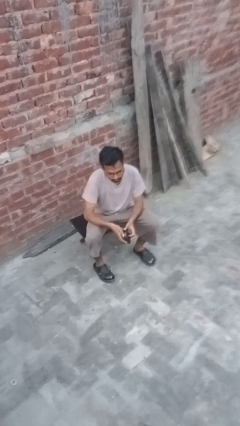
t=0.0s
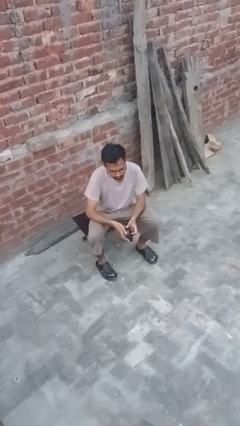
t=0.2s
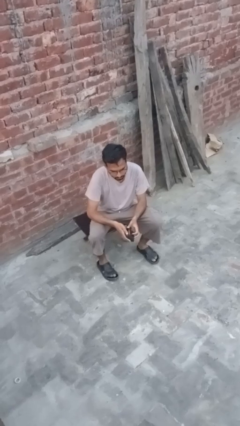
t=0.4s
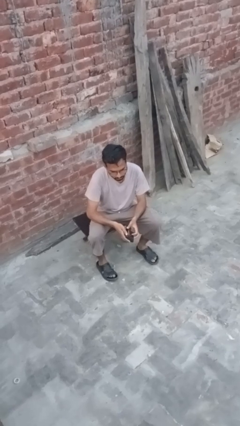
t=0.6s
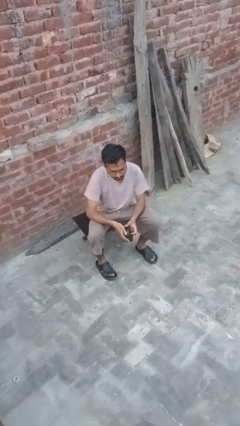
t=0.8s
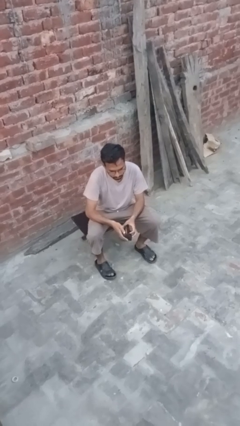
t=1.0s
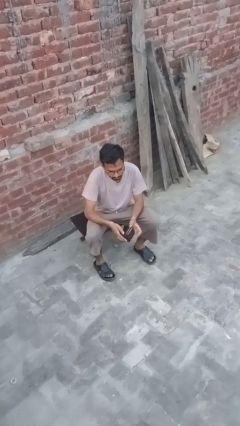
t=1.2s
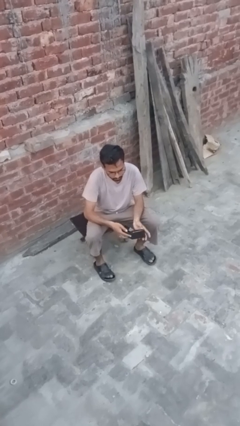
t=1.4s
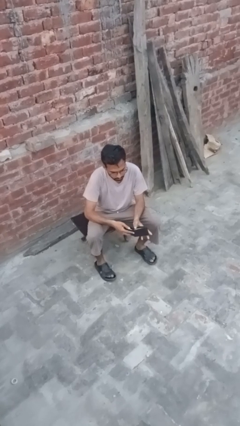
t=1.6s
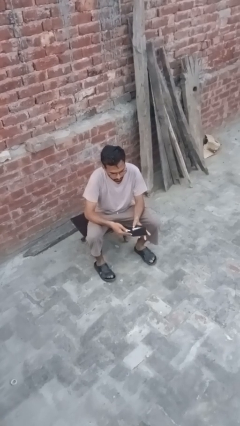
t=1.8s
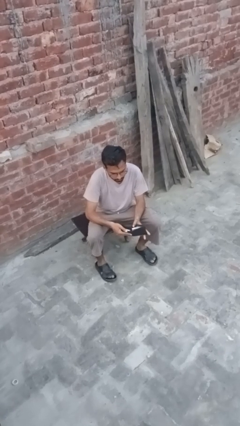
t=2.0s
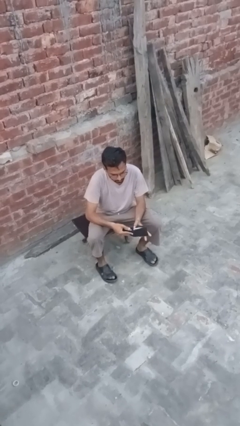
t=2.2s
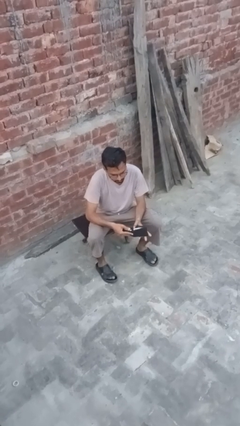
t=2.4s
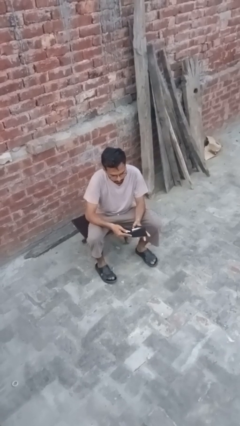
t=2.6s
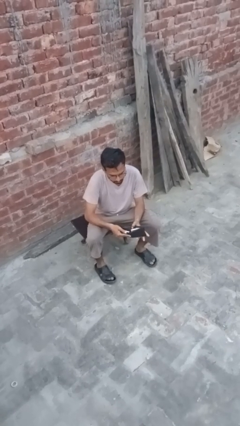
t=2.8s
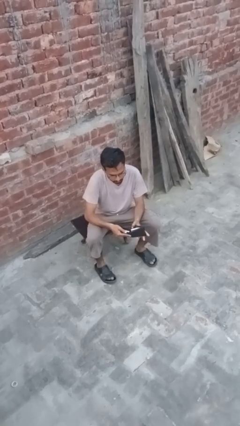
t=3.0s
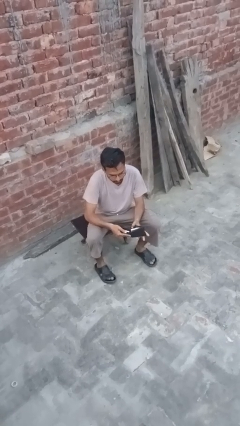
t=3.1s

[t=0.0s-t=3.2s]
person searches in purse

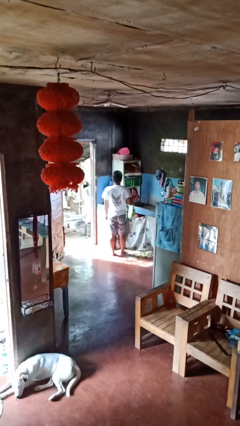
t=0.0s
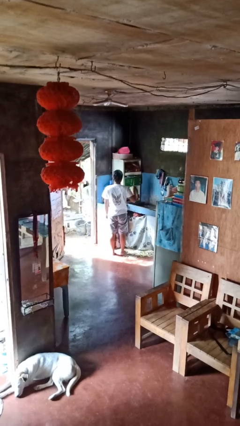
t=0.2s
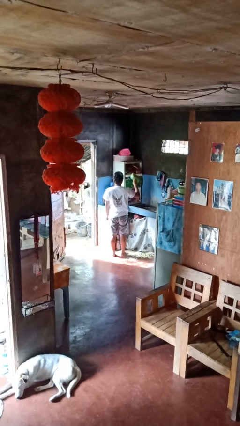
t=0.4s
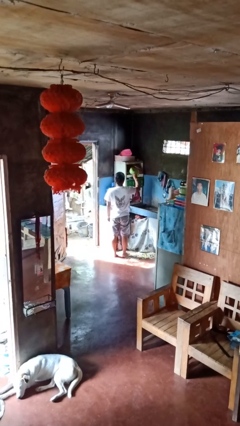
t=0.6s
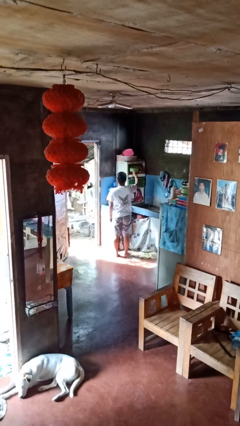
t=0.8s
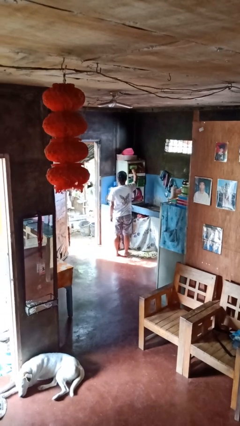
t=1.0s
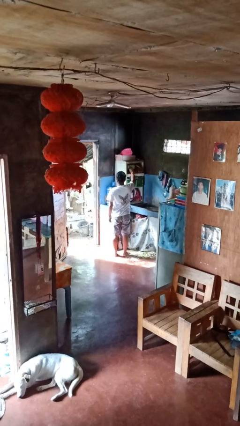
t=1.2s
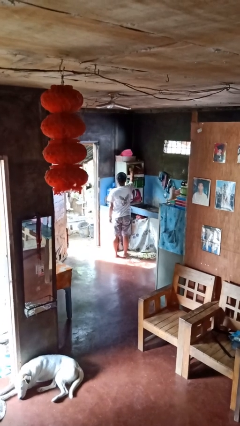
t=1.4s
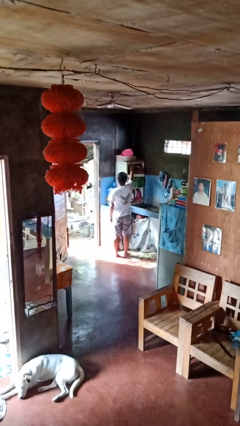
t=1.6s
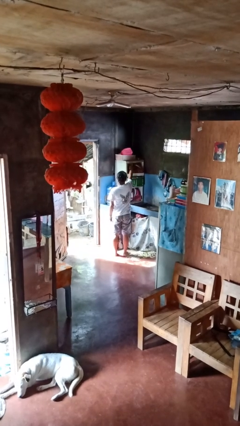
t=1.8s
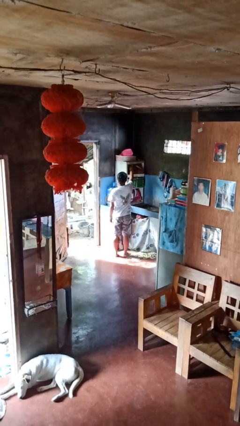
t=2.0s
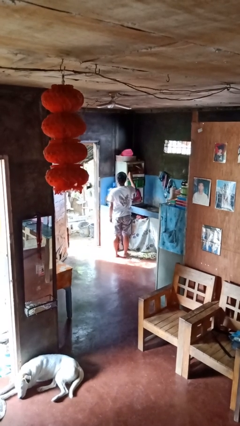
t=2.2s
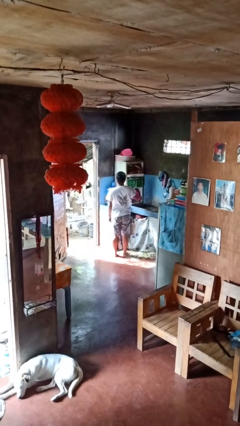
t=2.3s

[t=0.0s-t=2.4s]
person puts object in cabinet

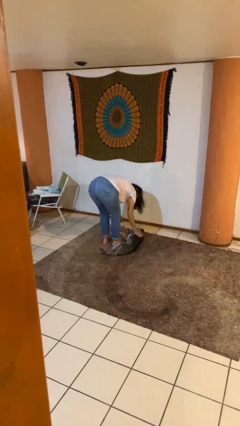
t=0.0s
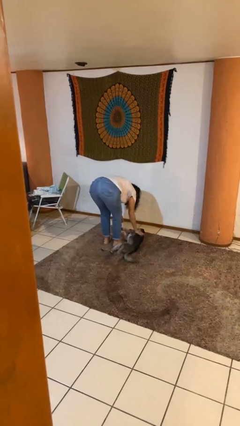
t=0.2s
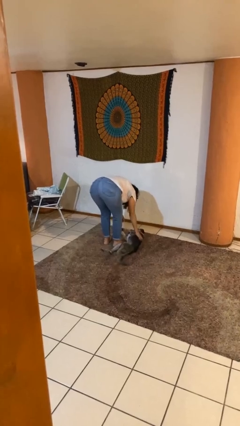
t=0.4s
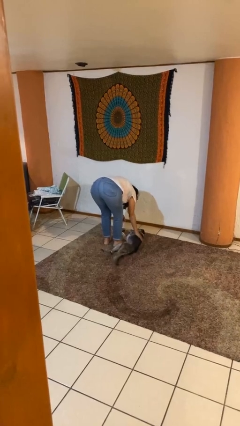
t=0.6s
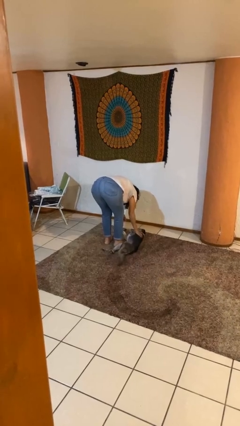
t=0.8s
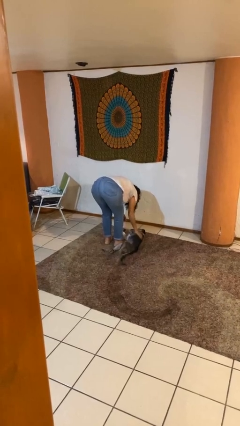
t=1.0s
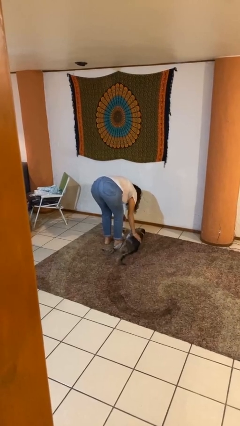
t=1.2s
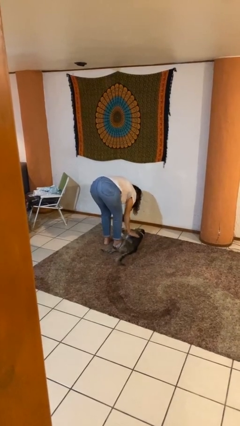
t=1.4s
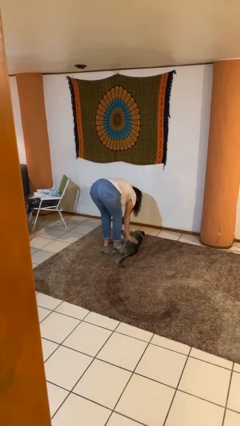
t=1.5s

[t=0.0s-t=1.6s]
person pets dog

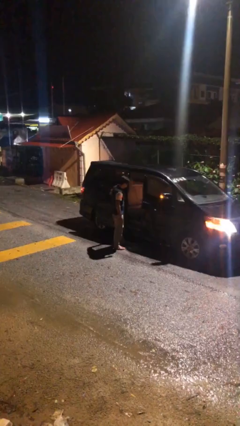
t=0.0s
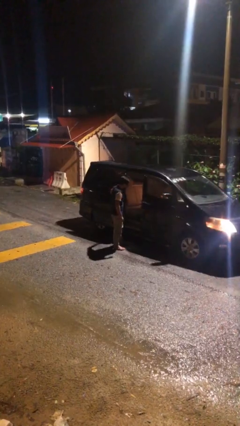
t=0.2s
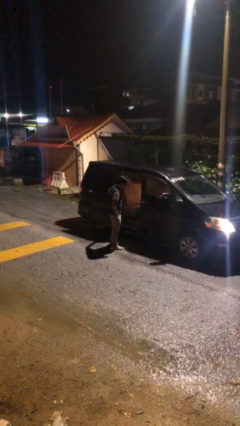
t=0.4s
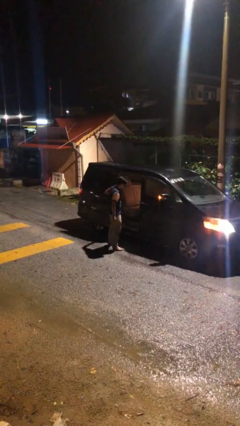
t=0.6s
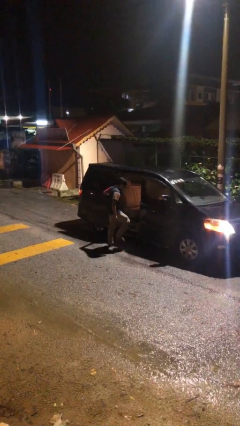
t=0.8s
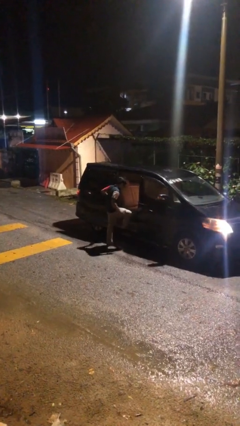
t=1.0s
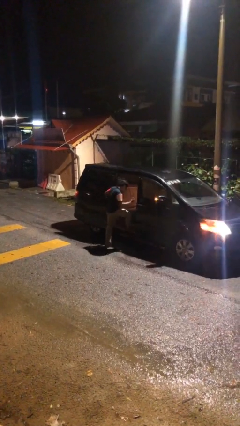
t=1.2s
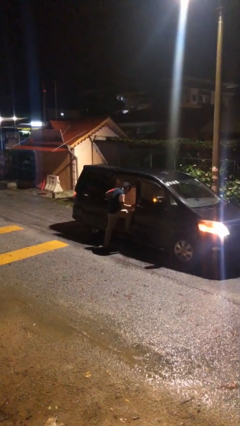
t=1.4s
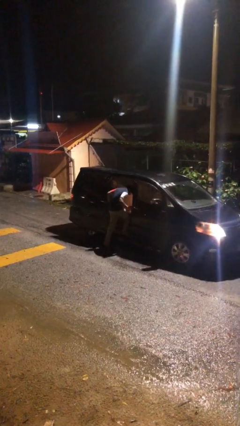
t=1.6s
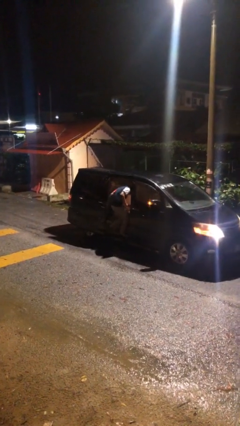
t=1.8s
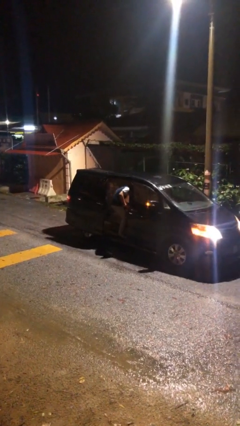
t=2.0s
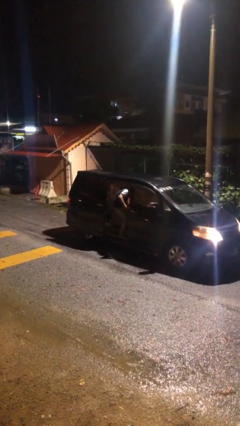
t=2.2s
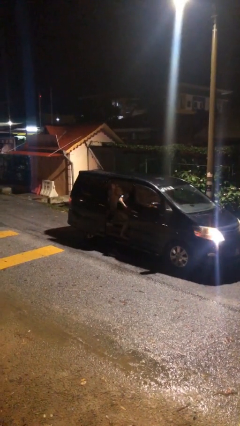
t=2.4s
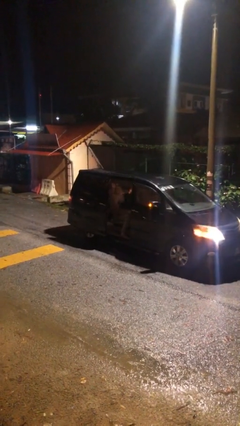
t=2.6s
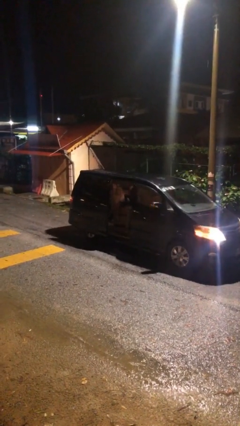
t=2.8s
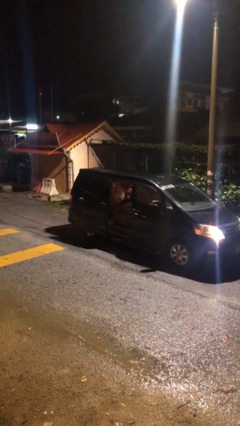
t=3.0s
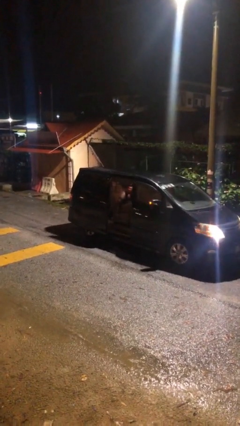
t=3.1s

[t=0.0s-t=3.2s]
person enters car

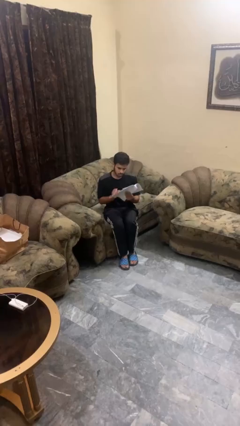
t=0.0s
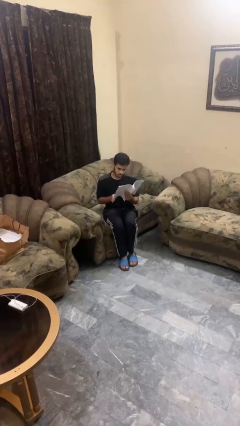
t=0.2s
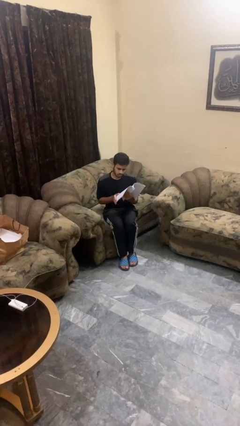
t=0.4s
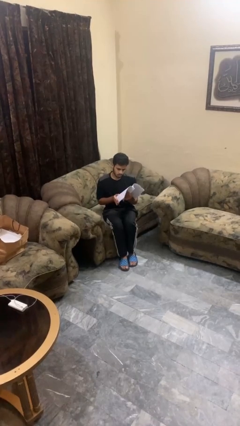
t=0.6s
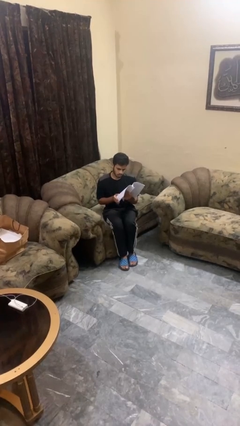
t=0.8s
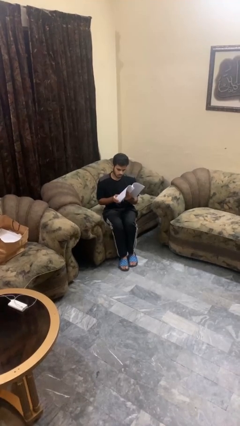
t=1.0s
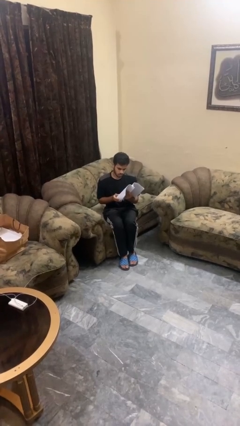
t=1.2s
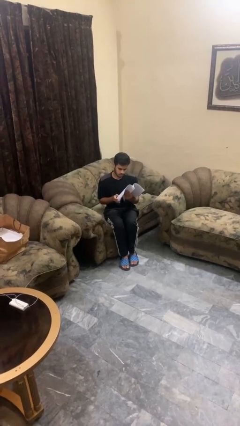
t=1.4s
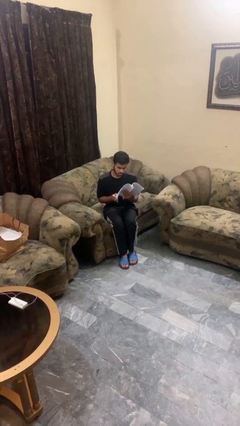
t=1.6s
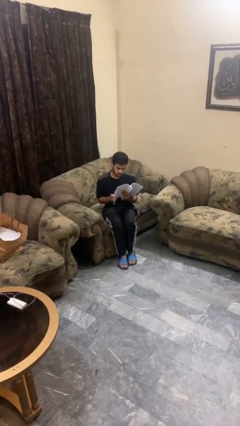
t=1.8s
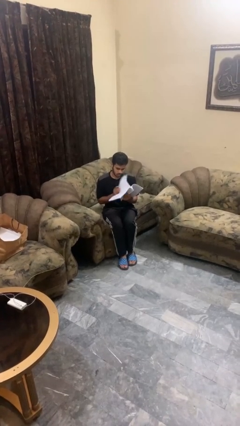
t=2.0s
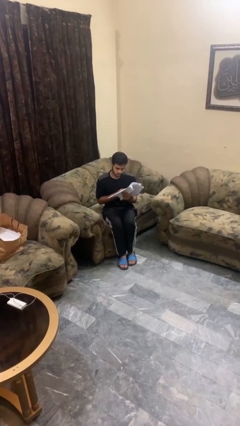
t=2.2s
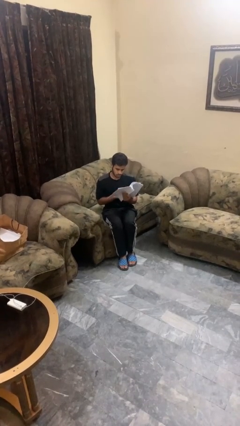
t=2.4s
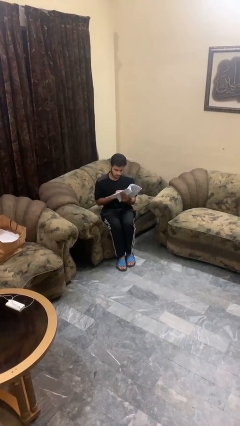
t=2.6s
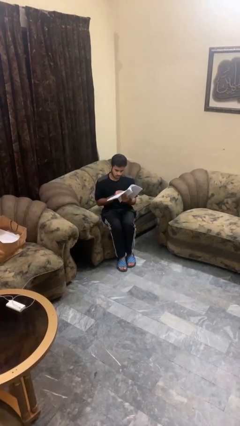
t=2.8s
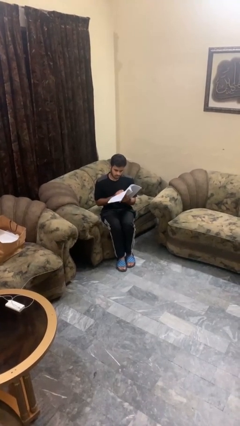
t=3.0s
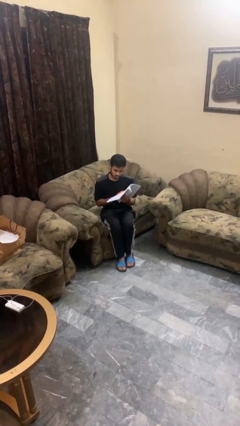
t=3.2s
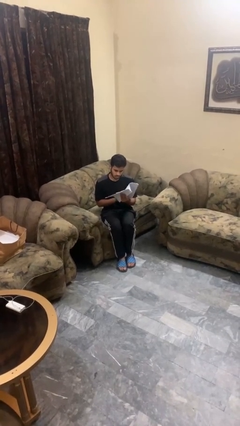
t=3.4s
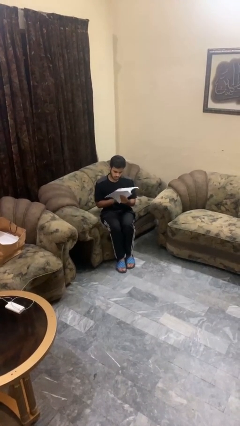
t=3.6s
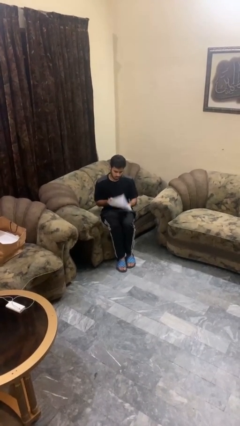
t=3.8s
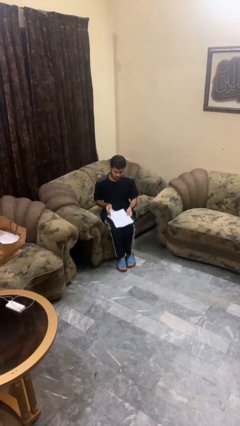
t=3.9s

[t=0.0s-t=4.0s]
person reads magazine

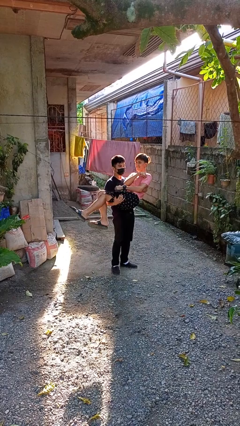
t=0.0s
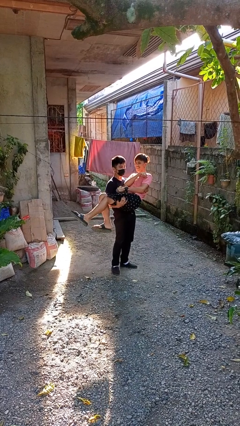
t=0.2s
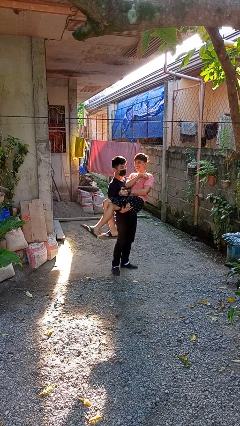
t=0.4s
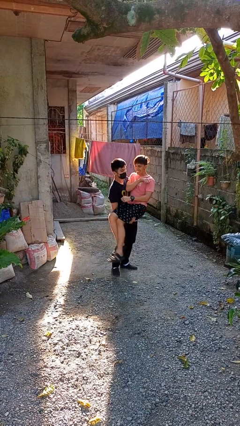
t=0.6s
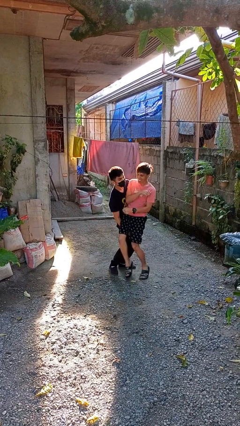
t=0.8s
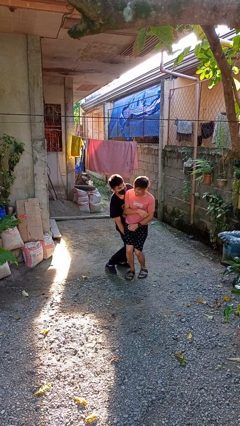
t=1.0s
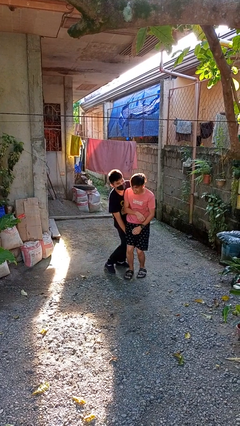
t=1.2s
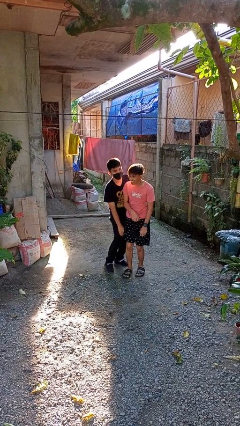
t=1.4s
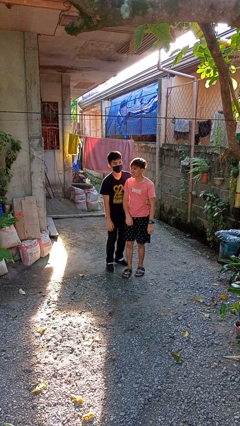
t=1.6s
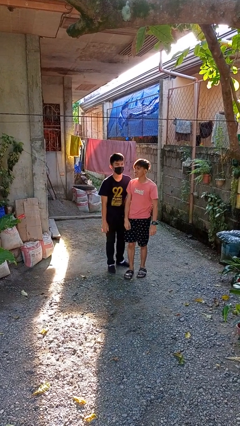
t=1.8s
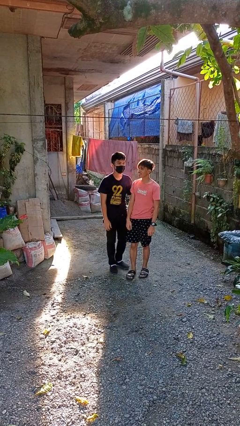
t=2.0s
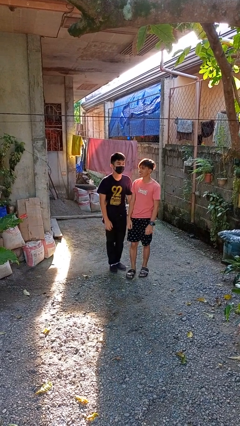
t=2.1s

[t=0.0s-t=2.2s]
person puts down person

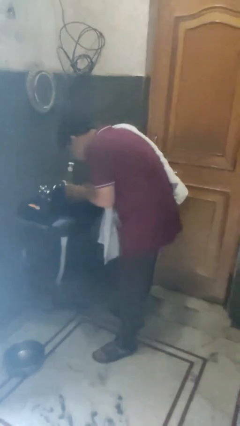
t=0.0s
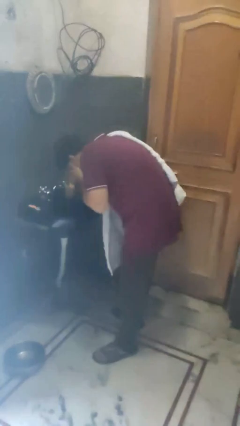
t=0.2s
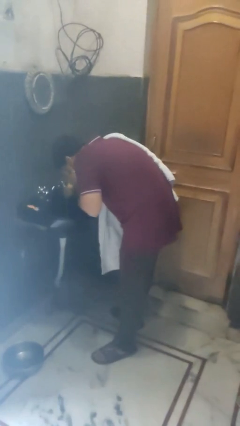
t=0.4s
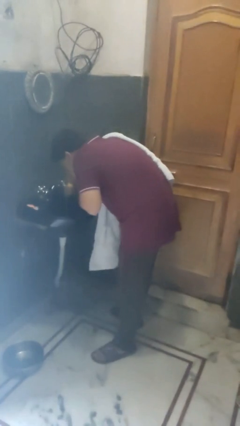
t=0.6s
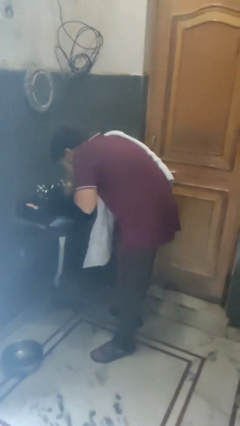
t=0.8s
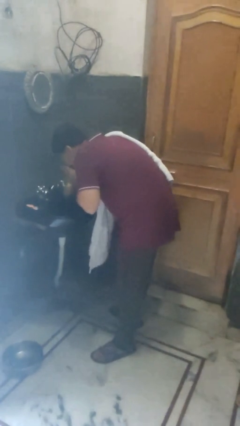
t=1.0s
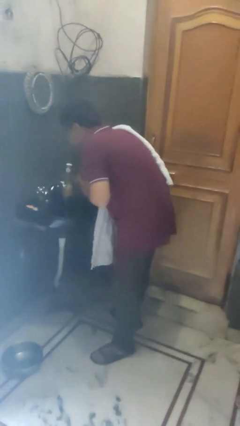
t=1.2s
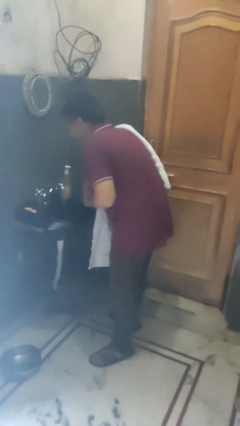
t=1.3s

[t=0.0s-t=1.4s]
person washes face
